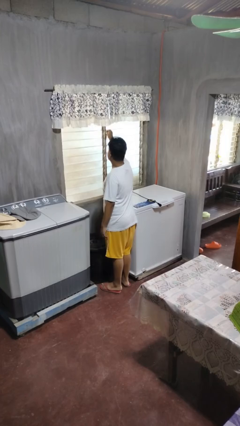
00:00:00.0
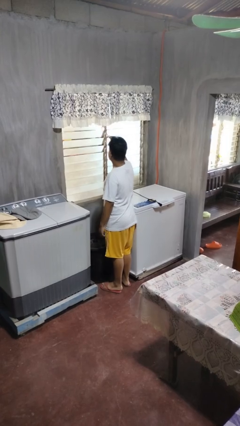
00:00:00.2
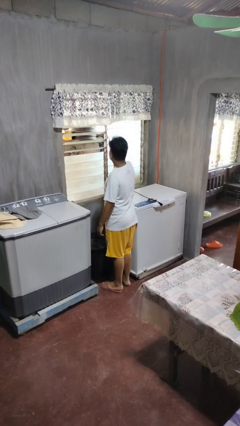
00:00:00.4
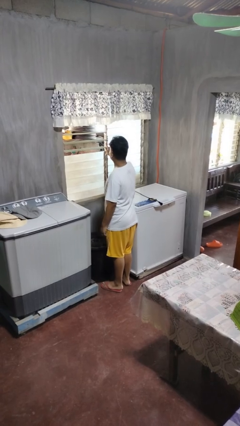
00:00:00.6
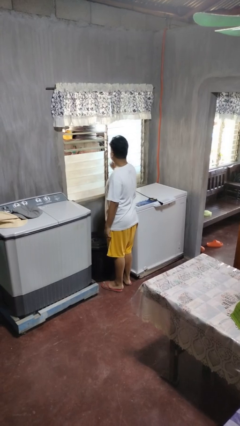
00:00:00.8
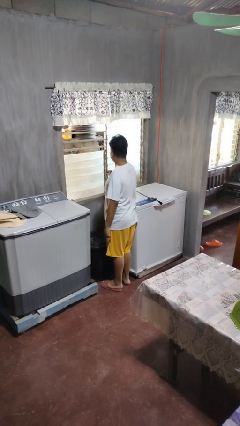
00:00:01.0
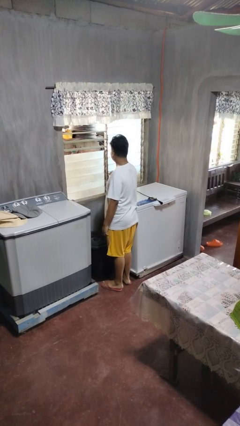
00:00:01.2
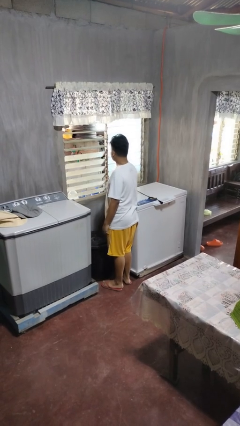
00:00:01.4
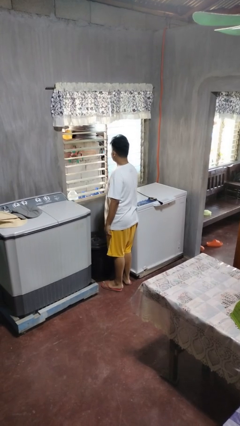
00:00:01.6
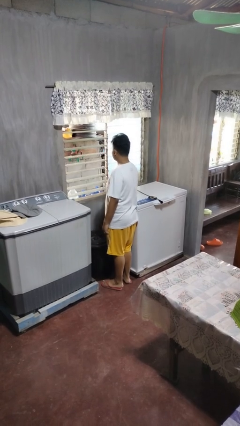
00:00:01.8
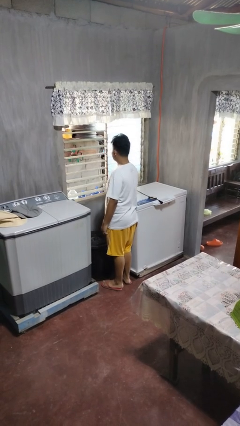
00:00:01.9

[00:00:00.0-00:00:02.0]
person opens home window

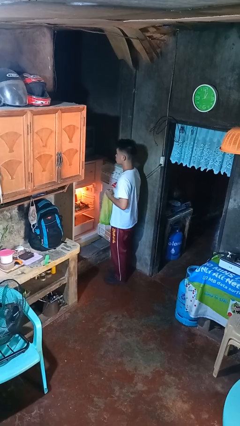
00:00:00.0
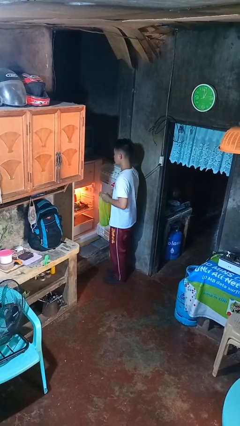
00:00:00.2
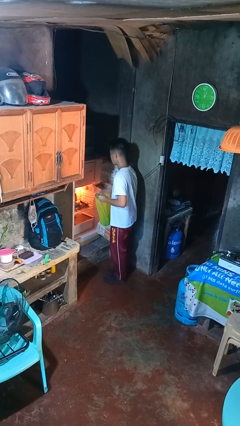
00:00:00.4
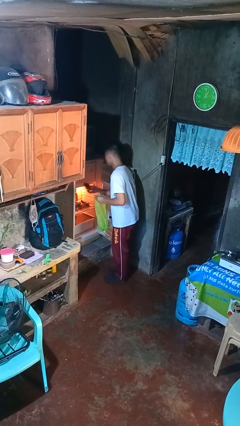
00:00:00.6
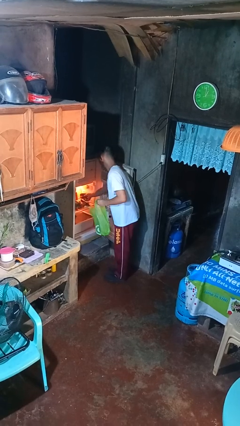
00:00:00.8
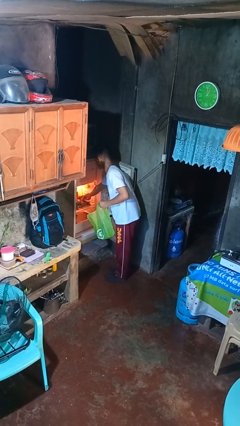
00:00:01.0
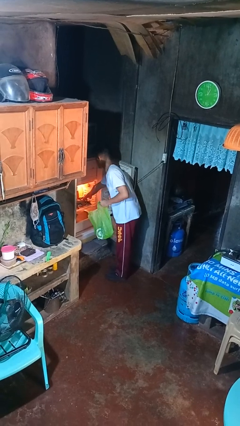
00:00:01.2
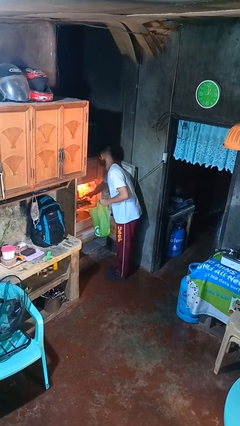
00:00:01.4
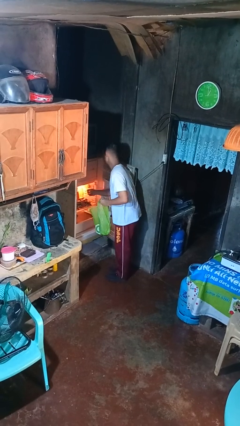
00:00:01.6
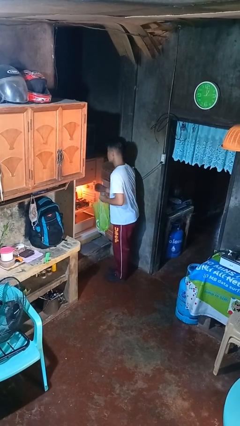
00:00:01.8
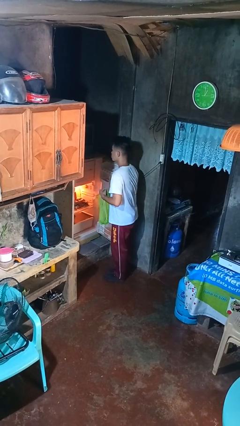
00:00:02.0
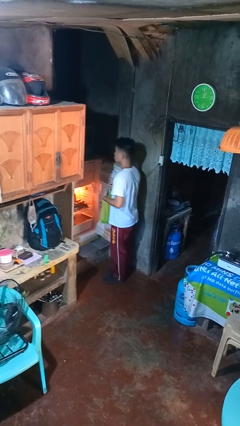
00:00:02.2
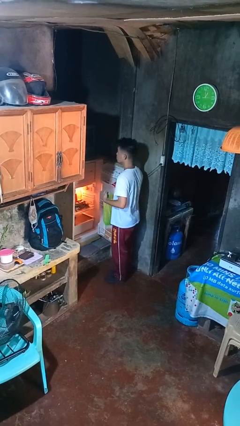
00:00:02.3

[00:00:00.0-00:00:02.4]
person loads groceries into refrigerator

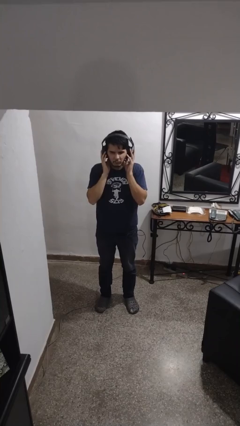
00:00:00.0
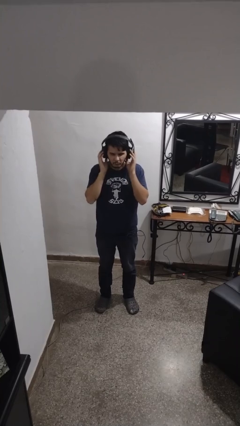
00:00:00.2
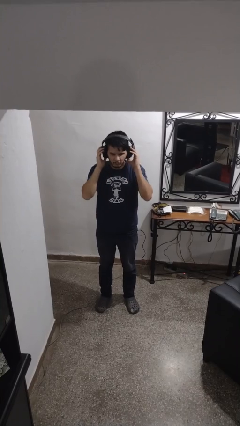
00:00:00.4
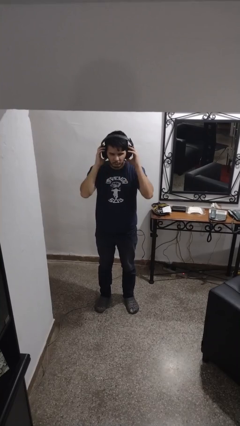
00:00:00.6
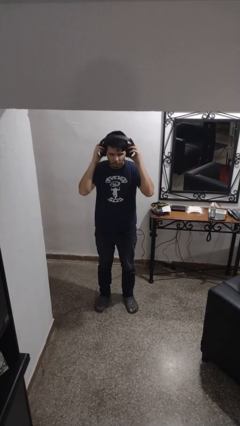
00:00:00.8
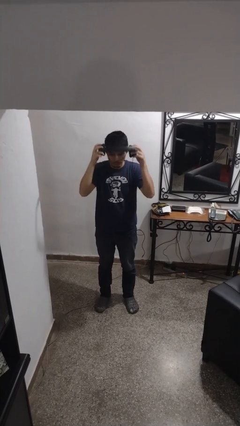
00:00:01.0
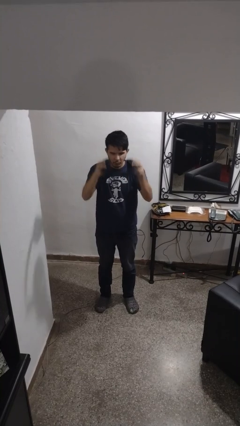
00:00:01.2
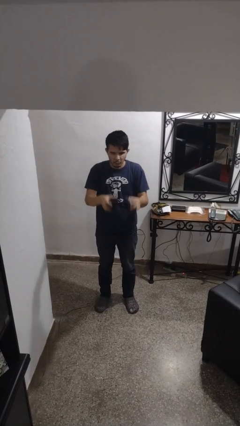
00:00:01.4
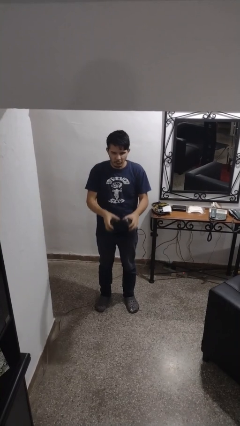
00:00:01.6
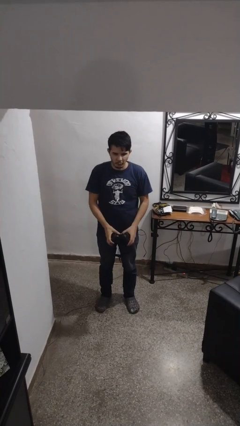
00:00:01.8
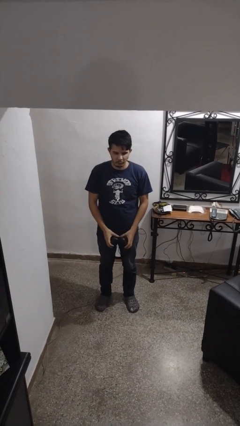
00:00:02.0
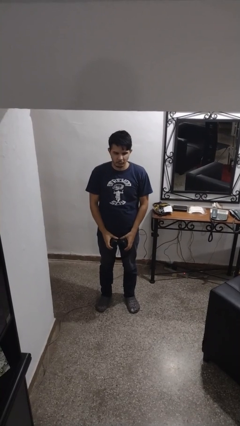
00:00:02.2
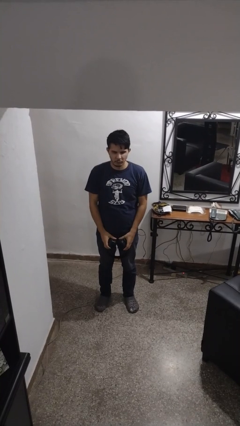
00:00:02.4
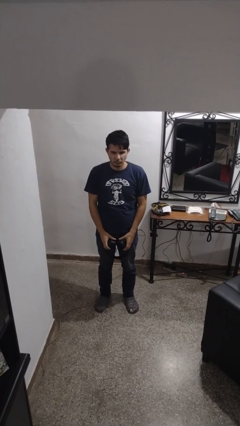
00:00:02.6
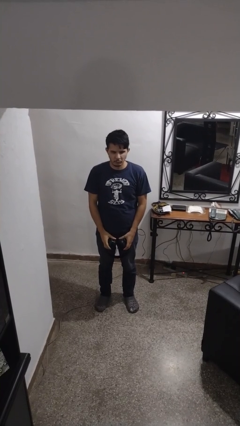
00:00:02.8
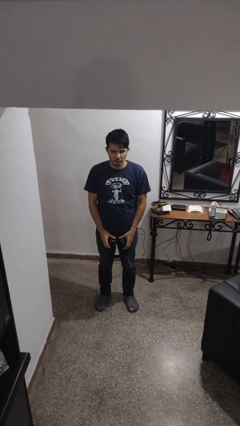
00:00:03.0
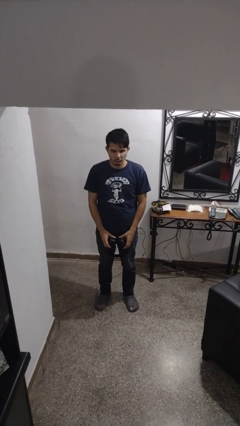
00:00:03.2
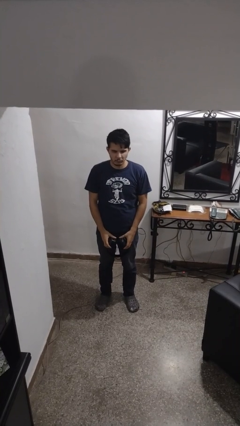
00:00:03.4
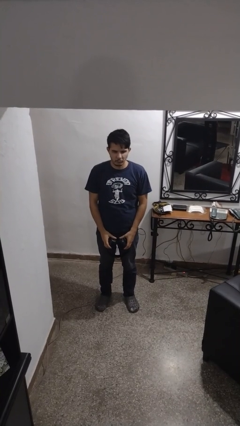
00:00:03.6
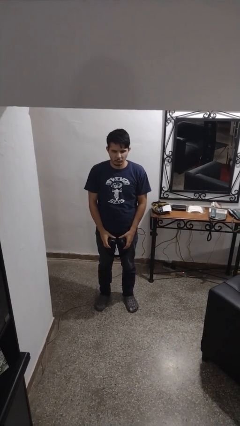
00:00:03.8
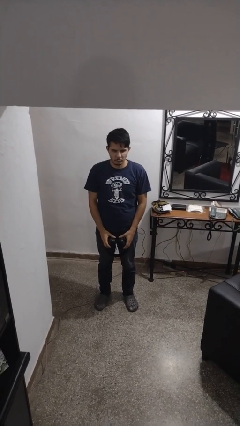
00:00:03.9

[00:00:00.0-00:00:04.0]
person takes off headphones

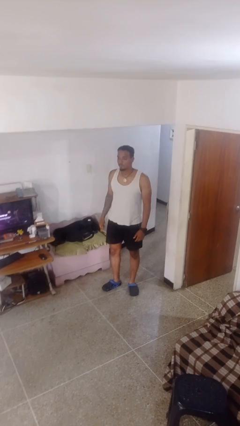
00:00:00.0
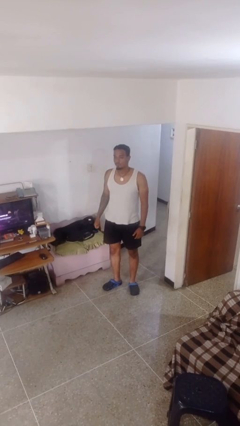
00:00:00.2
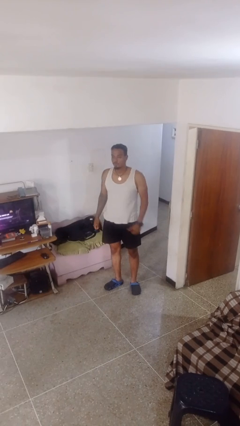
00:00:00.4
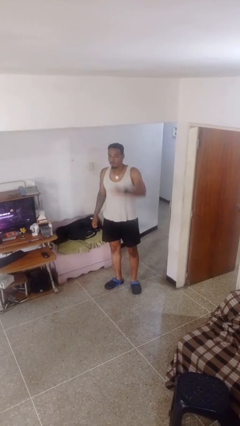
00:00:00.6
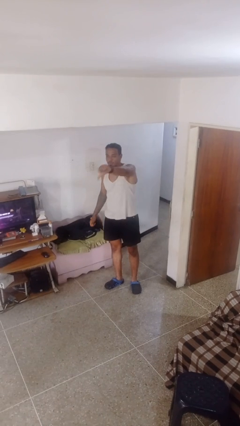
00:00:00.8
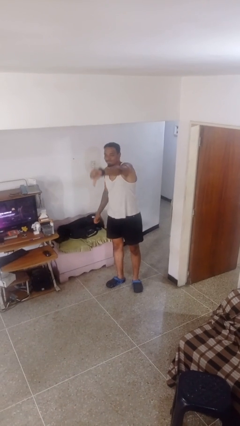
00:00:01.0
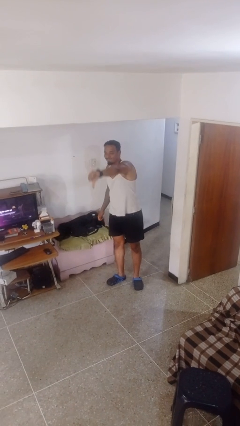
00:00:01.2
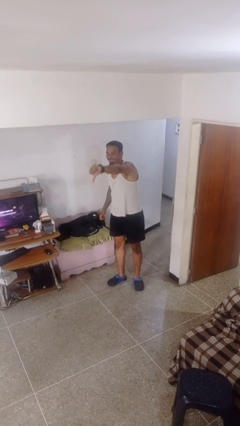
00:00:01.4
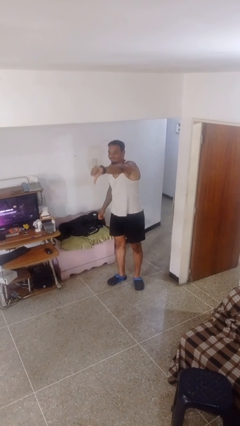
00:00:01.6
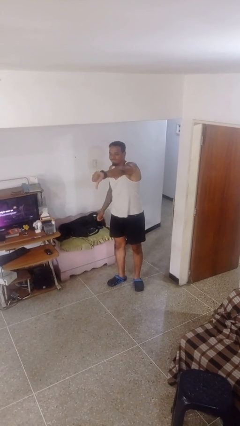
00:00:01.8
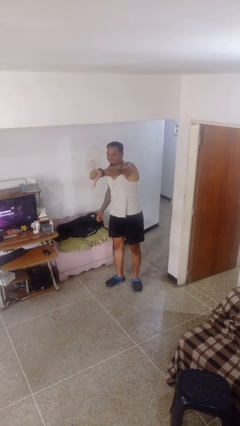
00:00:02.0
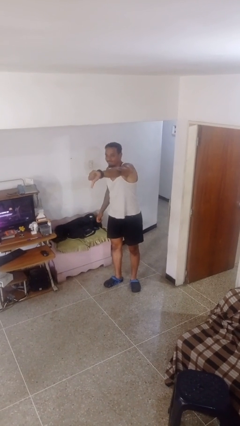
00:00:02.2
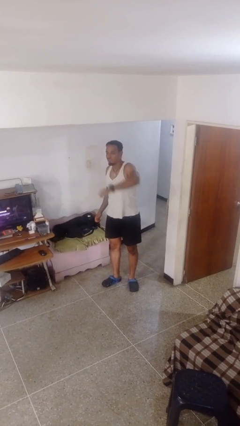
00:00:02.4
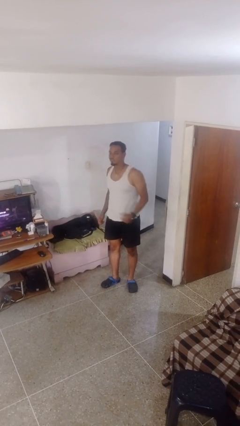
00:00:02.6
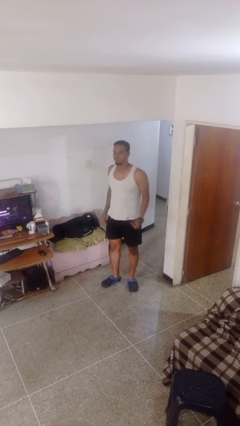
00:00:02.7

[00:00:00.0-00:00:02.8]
person gestures thumbs down

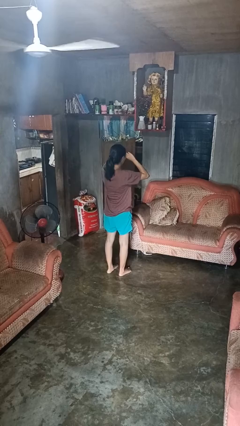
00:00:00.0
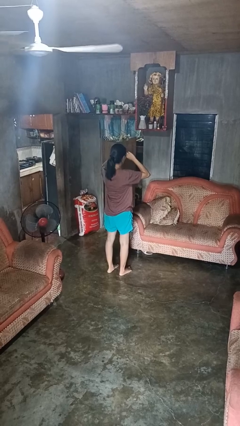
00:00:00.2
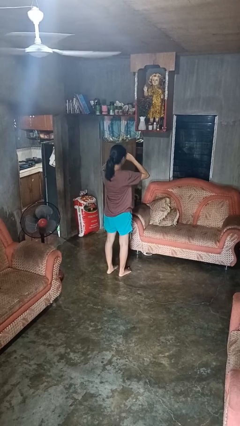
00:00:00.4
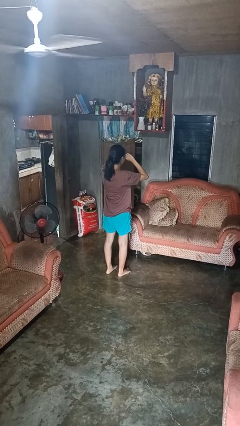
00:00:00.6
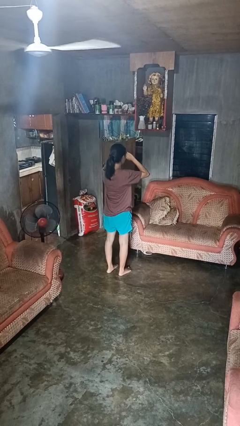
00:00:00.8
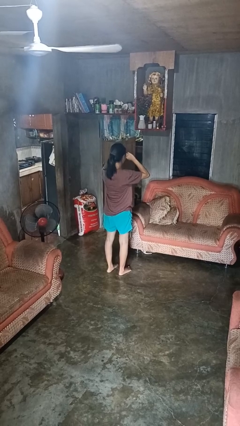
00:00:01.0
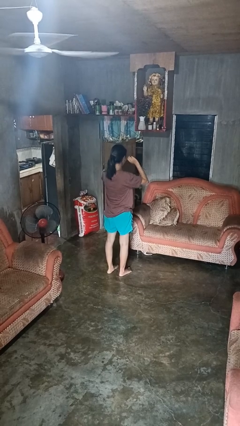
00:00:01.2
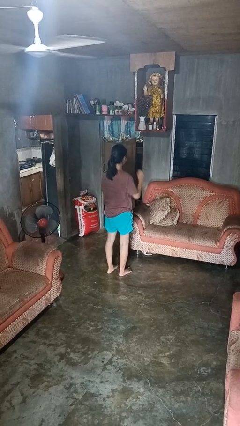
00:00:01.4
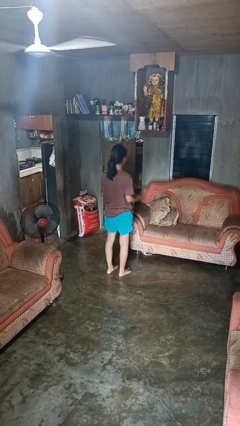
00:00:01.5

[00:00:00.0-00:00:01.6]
person rubs eyes

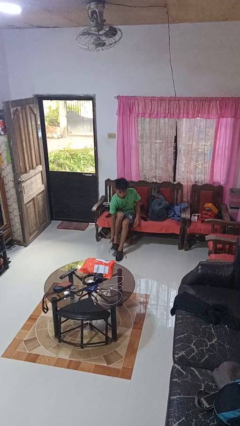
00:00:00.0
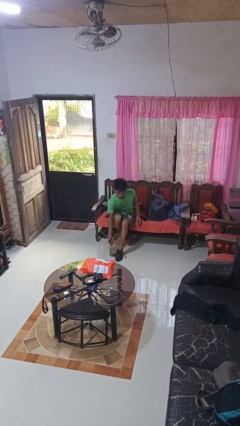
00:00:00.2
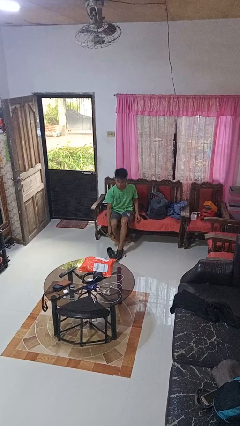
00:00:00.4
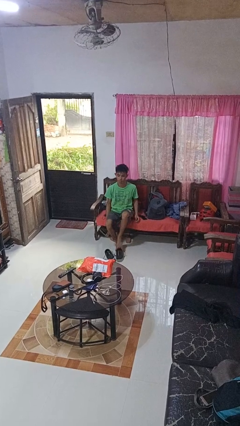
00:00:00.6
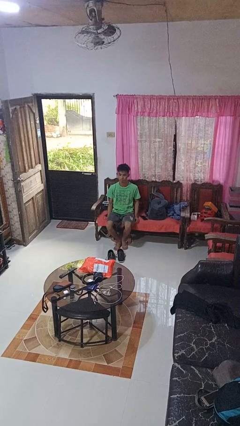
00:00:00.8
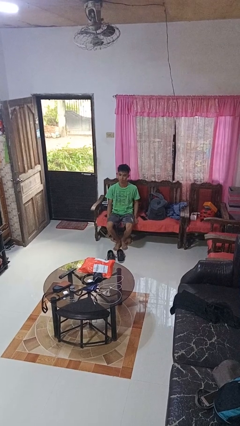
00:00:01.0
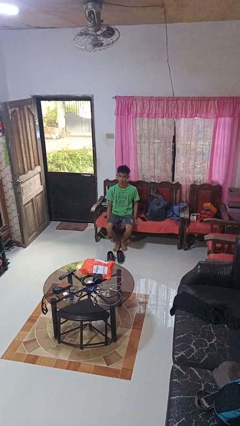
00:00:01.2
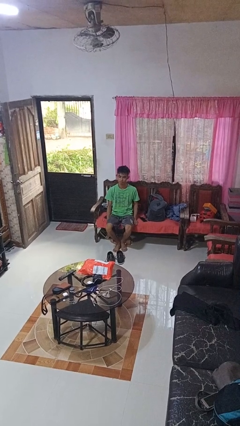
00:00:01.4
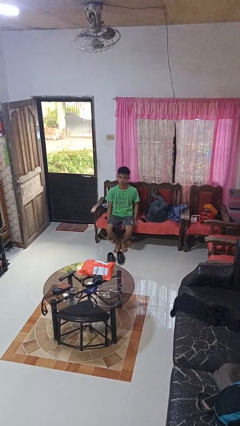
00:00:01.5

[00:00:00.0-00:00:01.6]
person takes off shoes

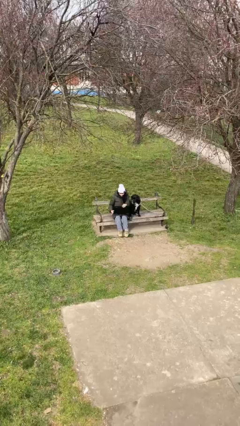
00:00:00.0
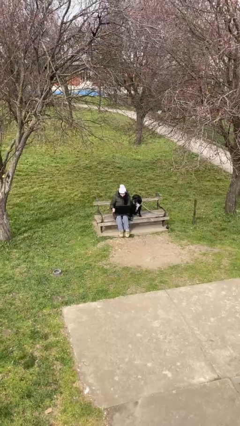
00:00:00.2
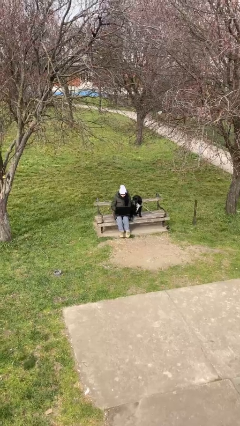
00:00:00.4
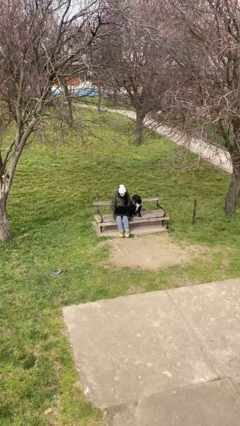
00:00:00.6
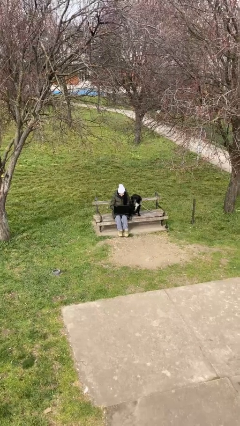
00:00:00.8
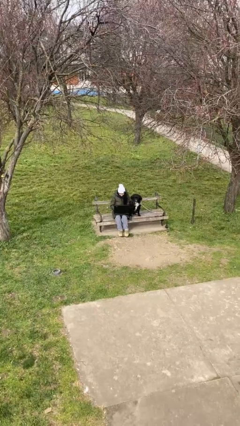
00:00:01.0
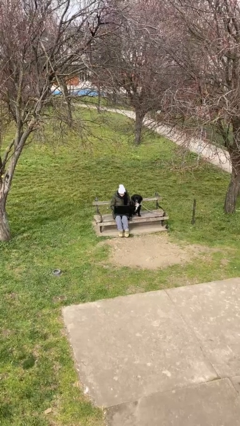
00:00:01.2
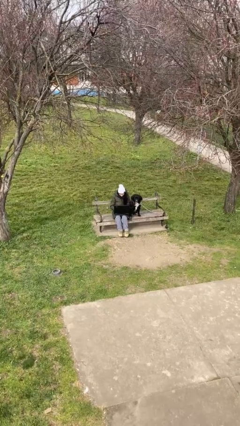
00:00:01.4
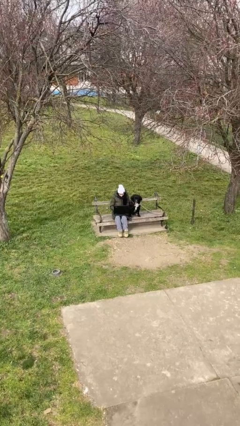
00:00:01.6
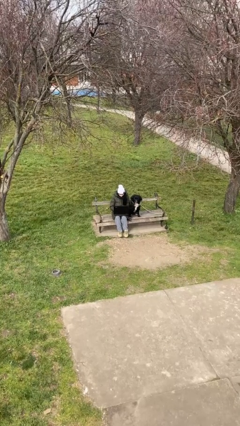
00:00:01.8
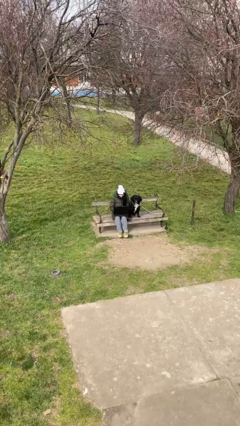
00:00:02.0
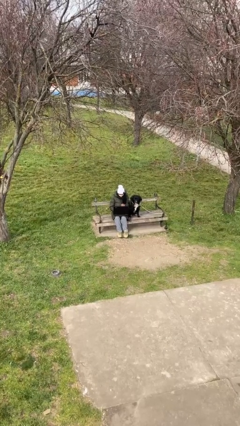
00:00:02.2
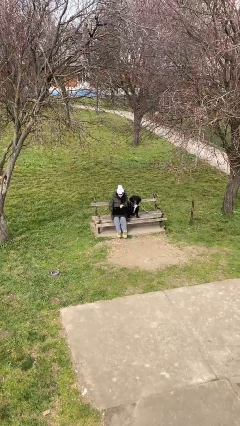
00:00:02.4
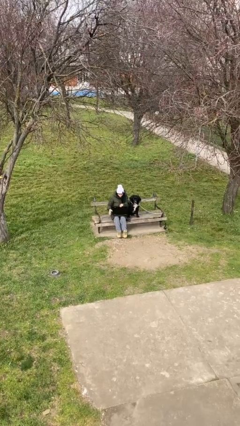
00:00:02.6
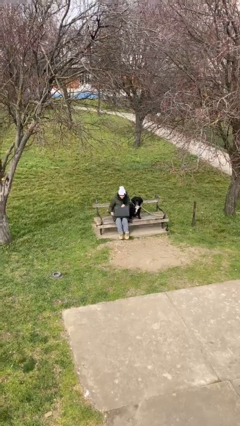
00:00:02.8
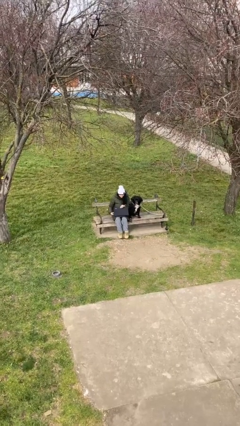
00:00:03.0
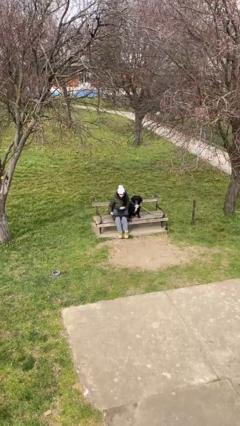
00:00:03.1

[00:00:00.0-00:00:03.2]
person interacts with laptop
